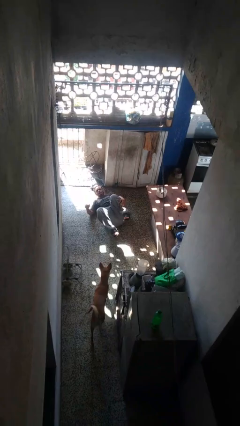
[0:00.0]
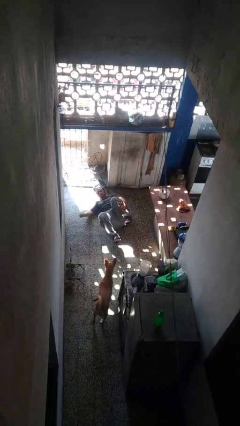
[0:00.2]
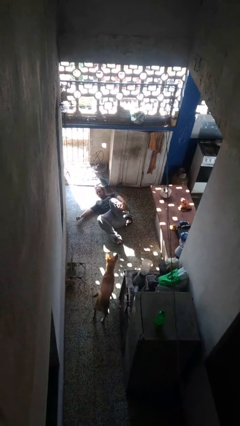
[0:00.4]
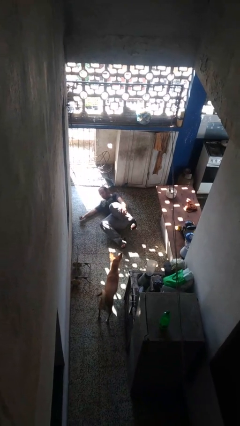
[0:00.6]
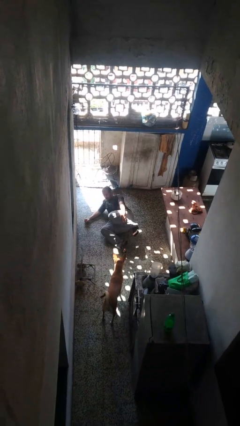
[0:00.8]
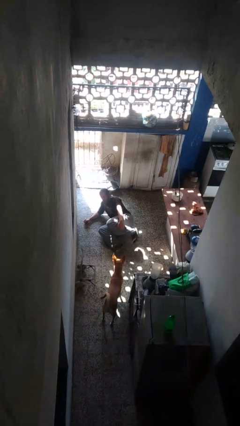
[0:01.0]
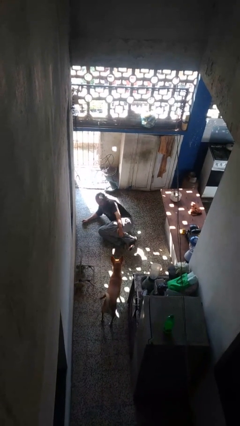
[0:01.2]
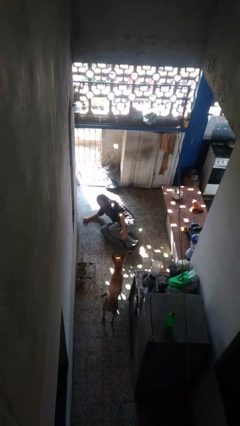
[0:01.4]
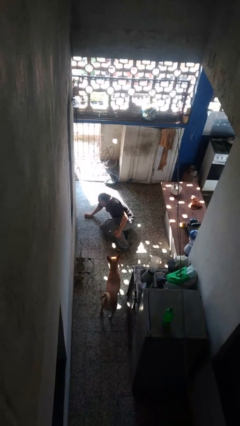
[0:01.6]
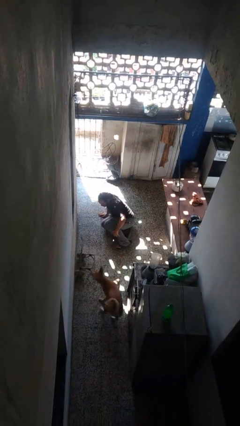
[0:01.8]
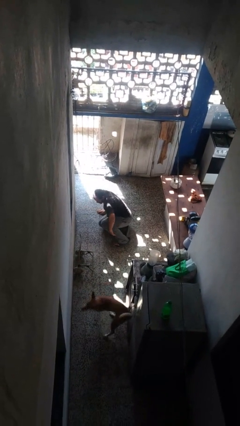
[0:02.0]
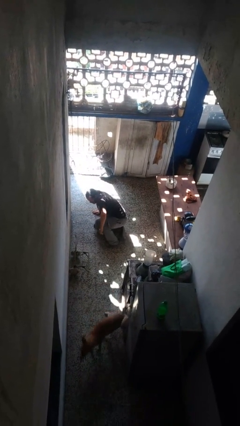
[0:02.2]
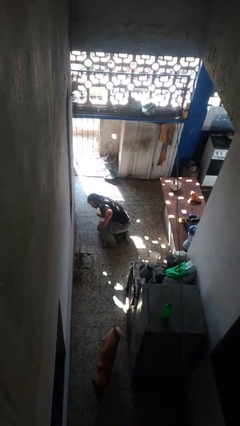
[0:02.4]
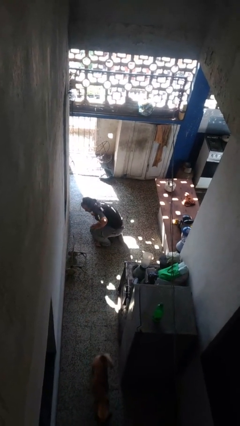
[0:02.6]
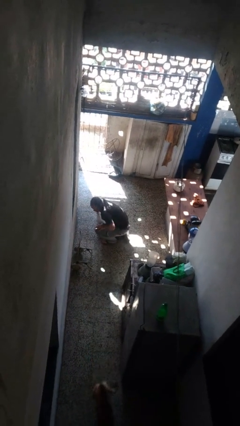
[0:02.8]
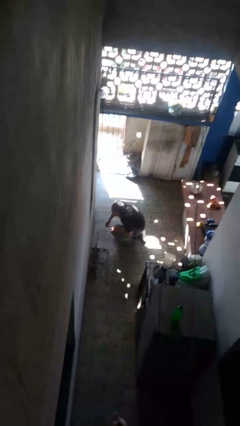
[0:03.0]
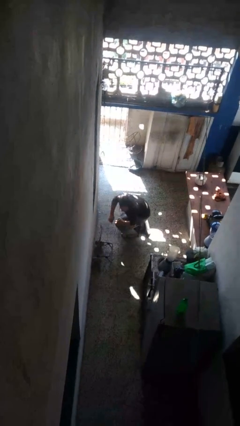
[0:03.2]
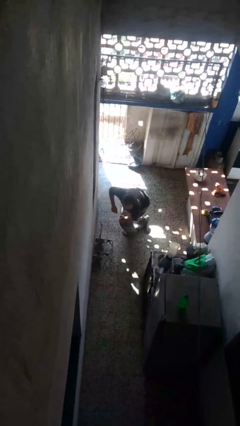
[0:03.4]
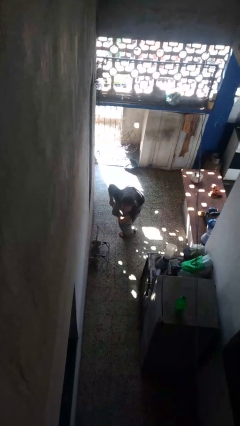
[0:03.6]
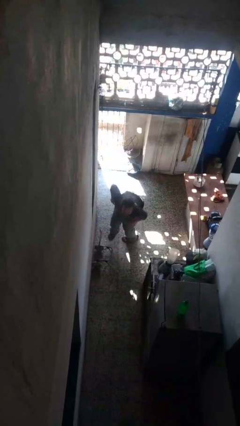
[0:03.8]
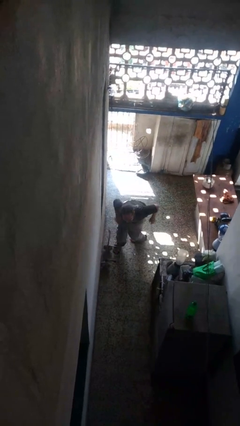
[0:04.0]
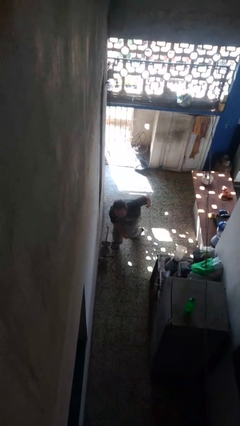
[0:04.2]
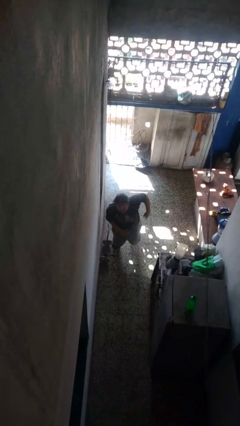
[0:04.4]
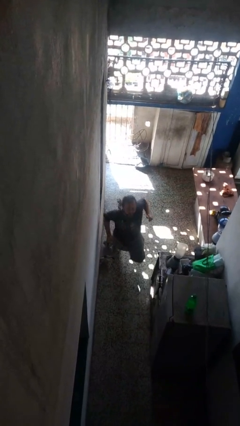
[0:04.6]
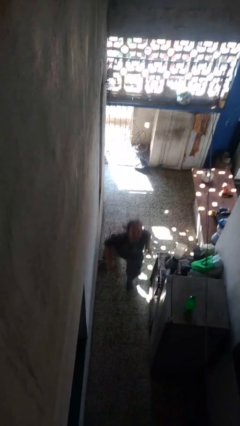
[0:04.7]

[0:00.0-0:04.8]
person stands up from floor

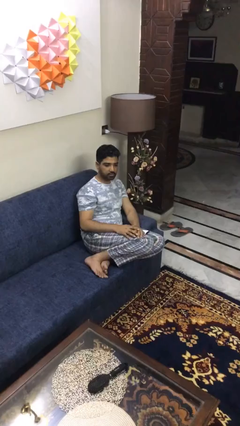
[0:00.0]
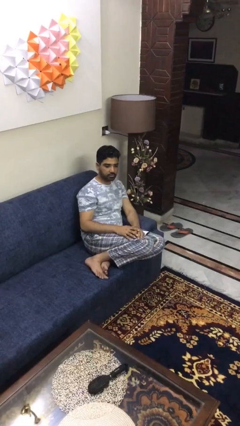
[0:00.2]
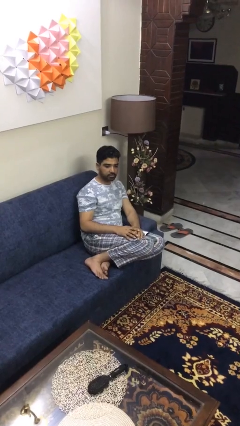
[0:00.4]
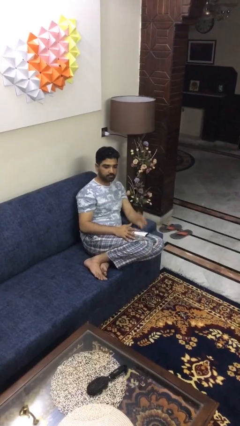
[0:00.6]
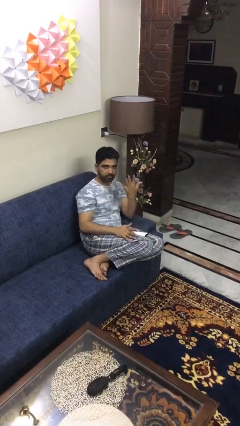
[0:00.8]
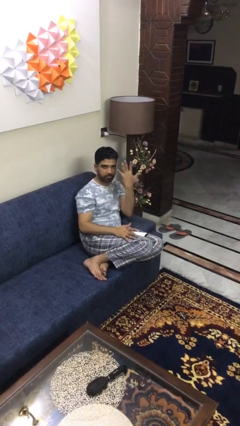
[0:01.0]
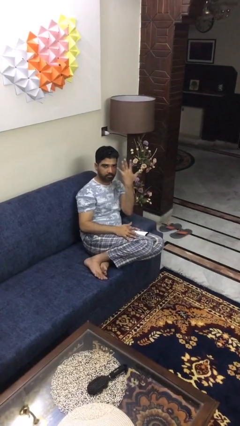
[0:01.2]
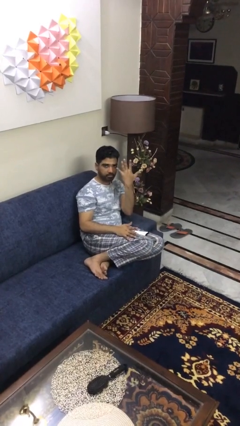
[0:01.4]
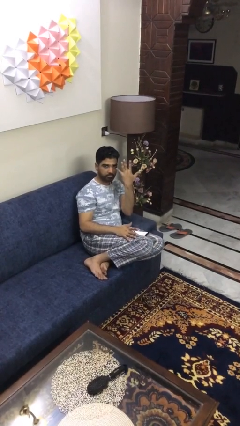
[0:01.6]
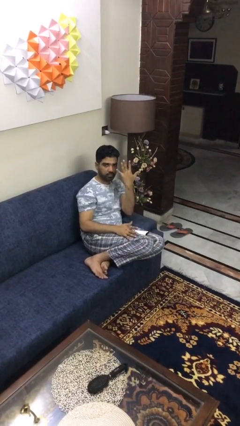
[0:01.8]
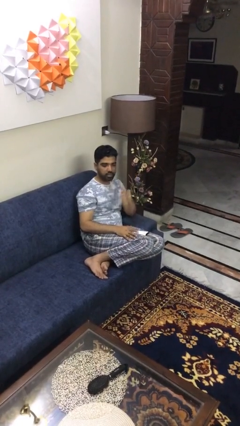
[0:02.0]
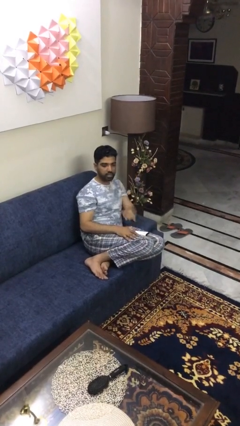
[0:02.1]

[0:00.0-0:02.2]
person gestures number five

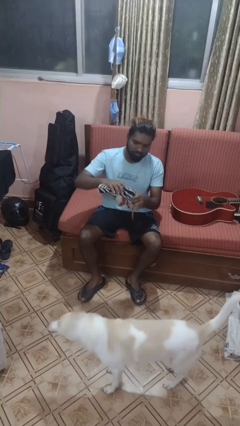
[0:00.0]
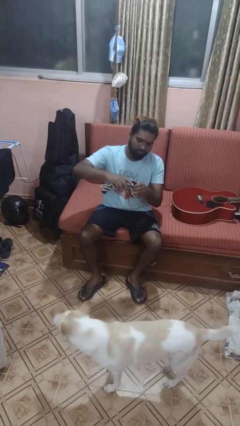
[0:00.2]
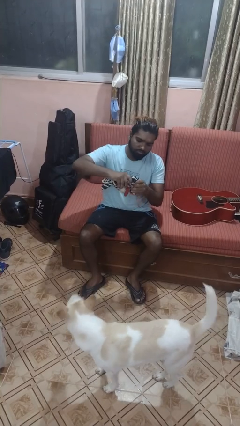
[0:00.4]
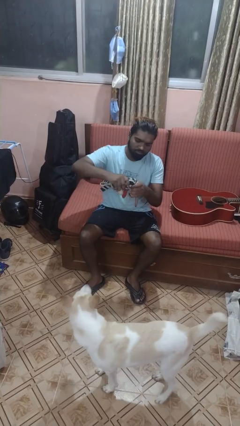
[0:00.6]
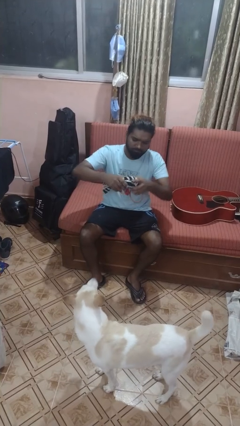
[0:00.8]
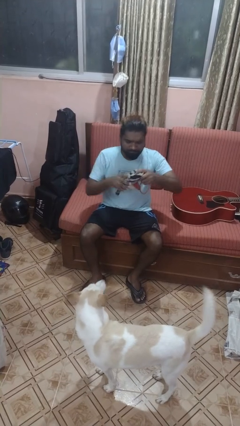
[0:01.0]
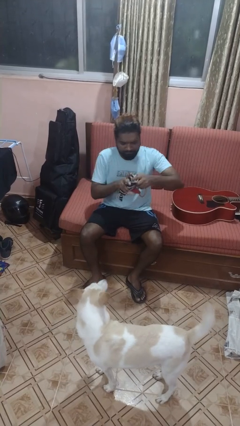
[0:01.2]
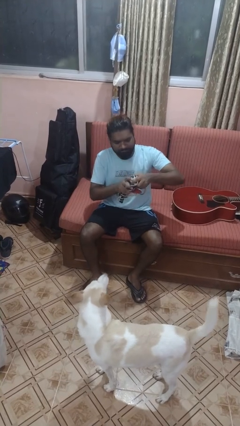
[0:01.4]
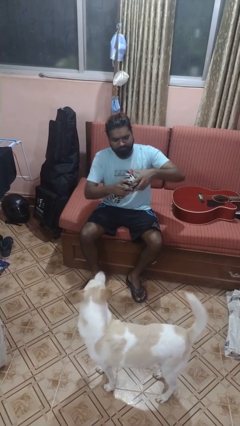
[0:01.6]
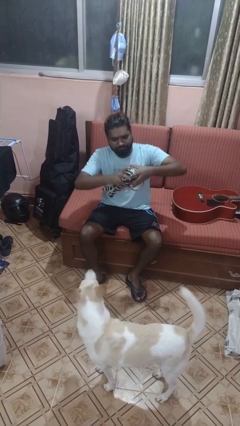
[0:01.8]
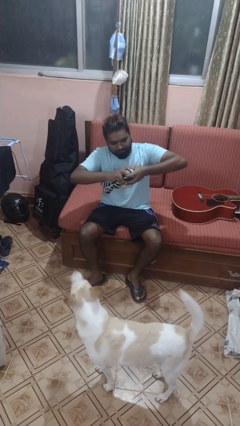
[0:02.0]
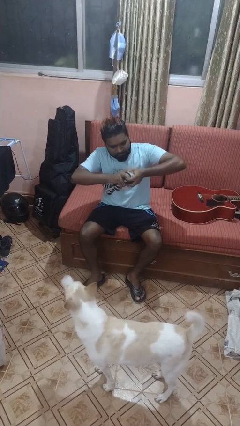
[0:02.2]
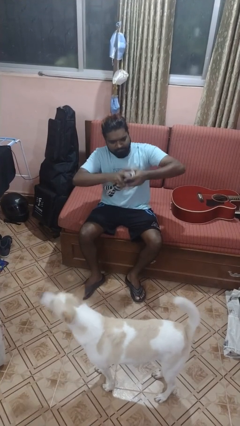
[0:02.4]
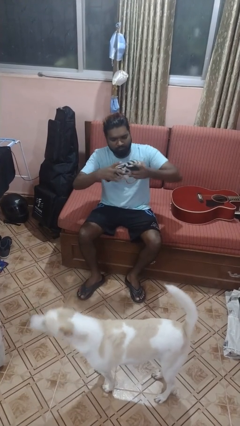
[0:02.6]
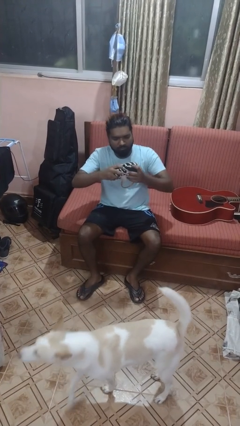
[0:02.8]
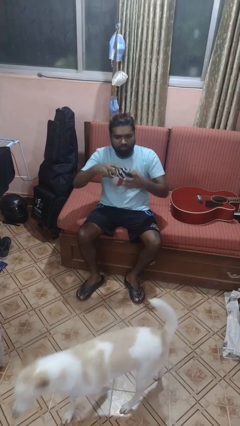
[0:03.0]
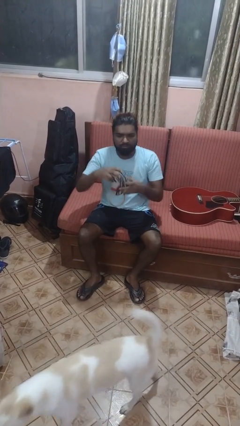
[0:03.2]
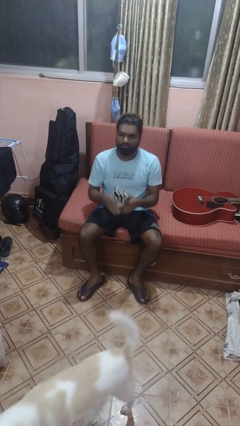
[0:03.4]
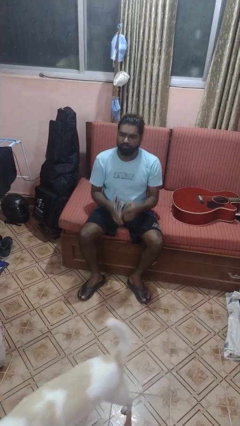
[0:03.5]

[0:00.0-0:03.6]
person squeezes object

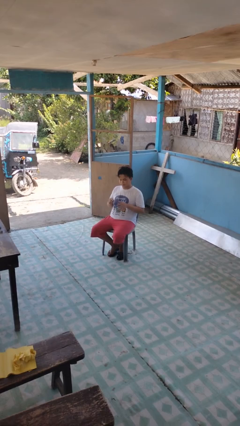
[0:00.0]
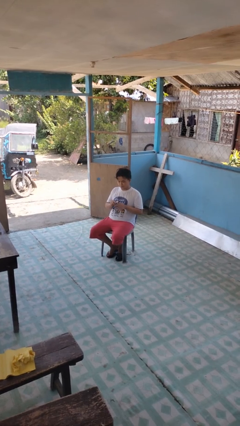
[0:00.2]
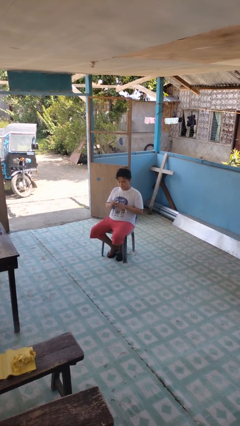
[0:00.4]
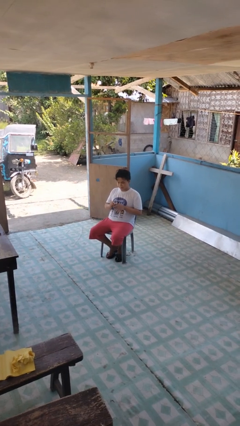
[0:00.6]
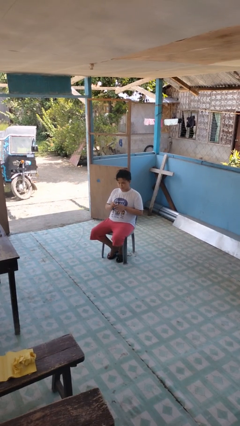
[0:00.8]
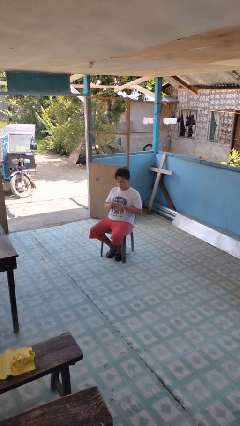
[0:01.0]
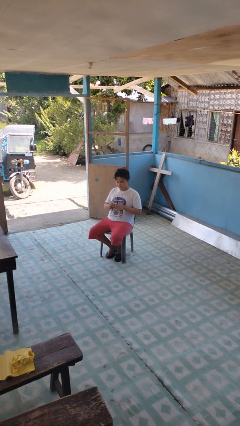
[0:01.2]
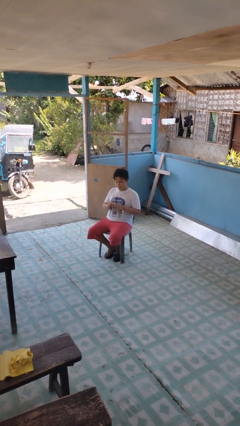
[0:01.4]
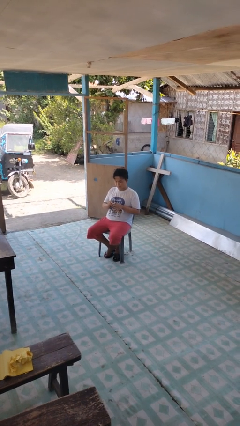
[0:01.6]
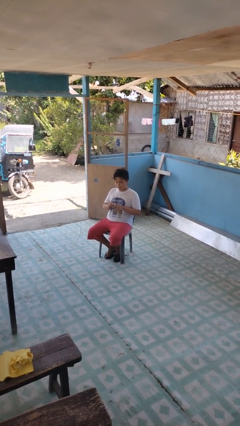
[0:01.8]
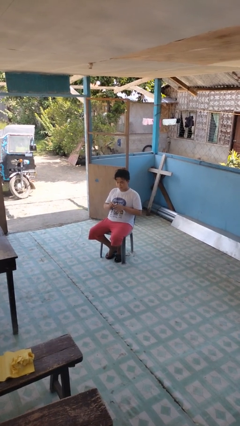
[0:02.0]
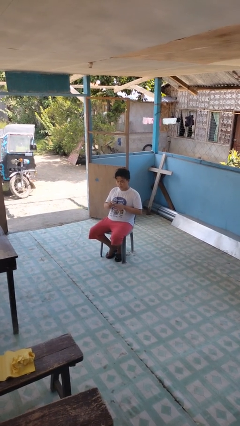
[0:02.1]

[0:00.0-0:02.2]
person files fingernails

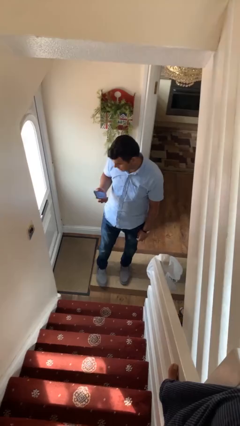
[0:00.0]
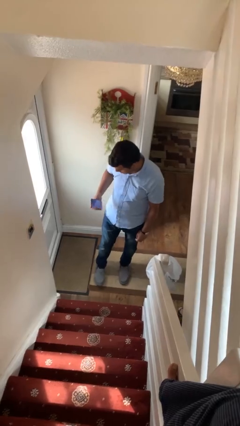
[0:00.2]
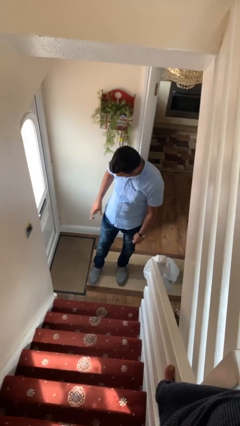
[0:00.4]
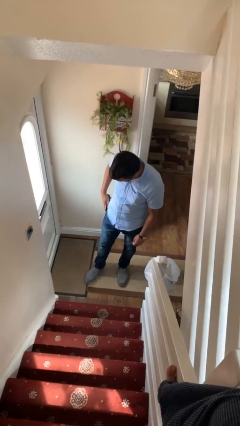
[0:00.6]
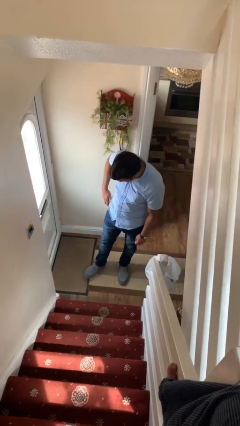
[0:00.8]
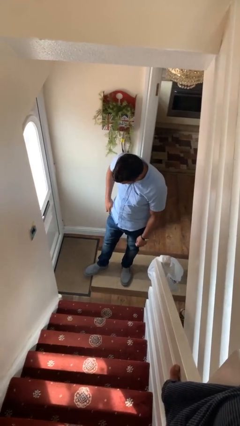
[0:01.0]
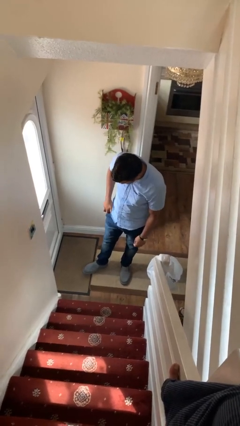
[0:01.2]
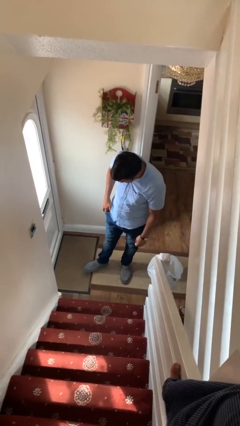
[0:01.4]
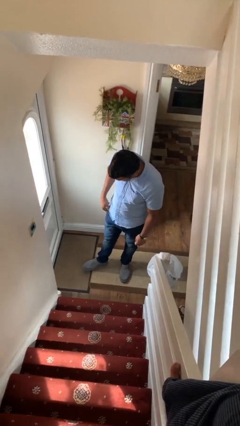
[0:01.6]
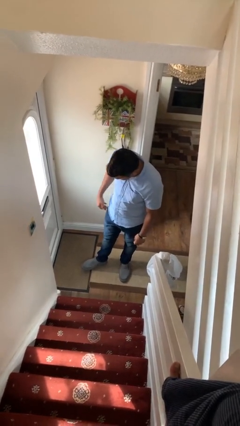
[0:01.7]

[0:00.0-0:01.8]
person puts phone into pocket

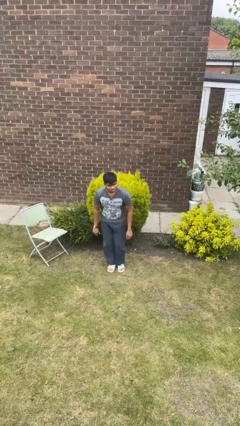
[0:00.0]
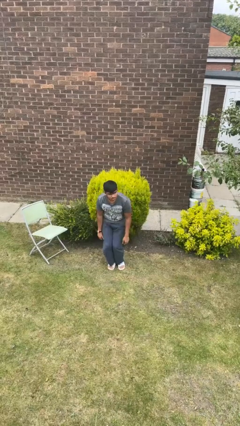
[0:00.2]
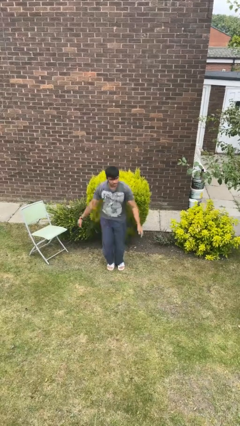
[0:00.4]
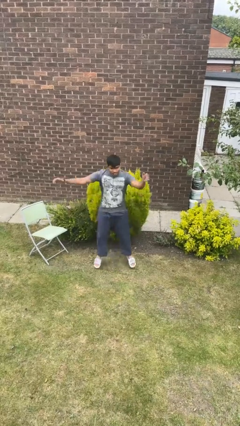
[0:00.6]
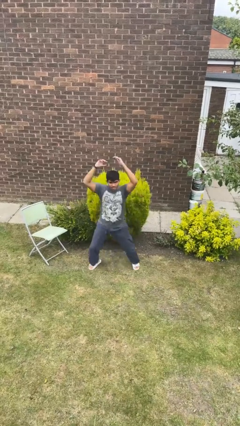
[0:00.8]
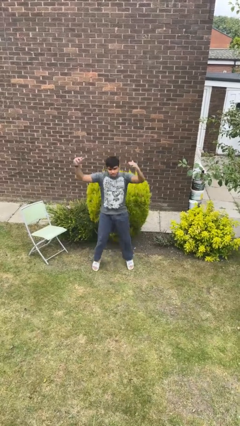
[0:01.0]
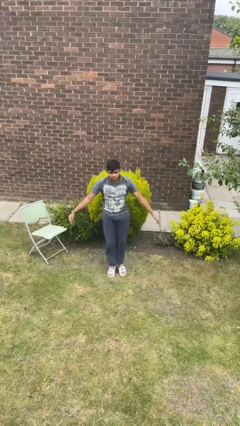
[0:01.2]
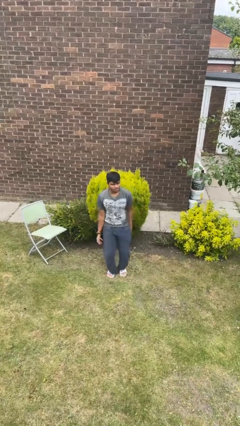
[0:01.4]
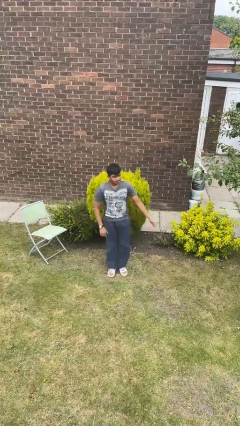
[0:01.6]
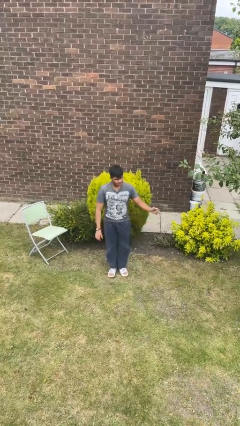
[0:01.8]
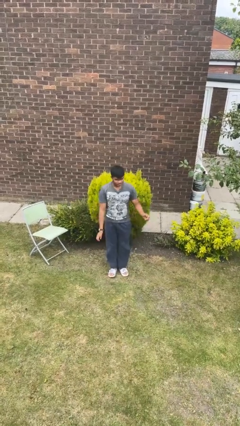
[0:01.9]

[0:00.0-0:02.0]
person exercises with jumping jacks

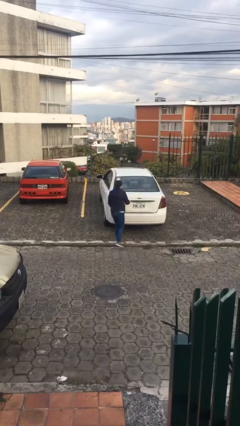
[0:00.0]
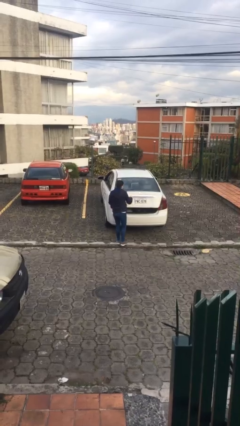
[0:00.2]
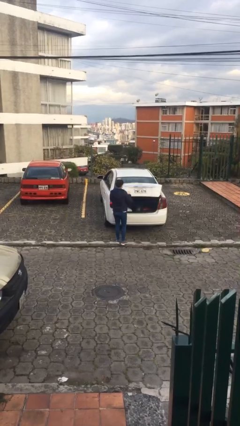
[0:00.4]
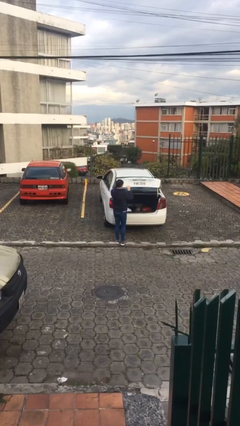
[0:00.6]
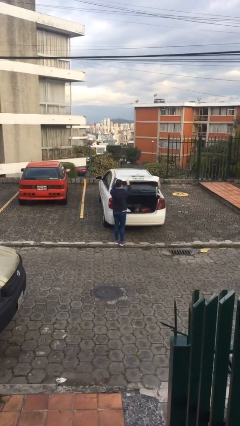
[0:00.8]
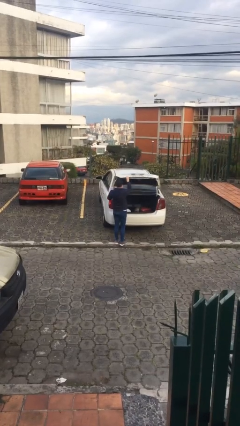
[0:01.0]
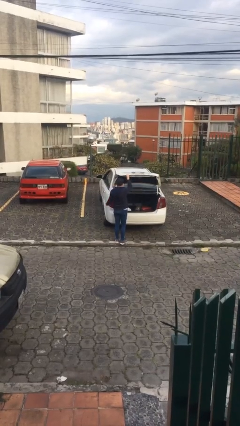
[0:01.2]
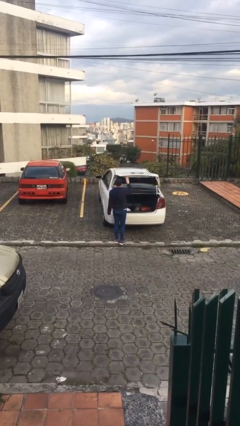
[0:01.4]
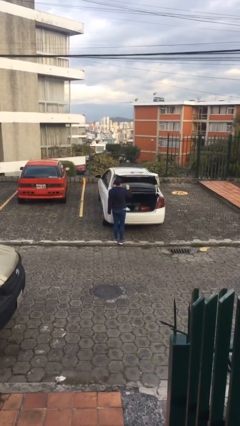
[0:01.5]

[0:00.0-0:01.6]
person opens car trunk
